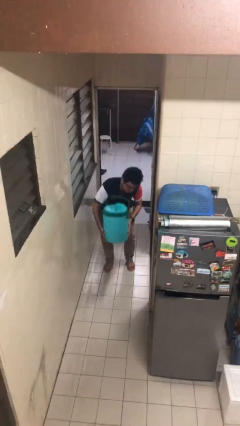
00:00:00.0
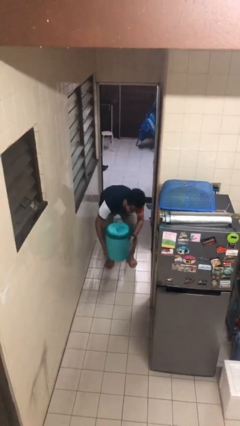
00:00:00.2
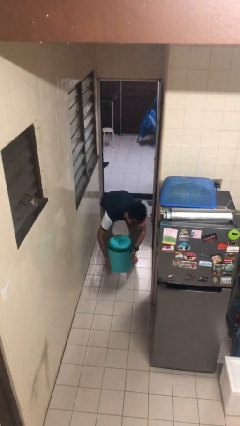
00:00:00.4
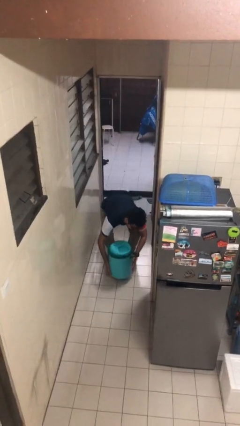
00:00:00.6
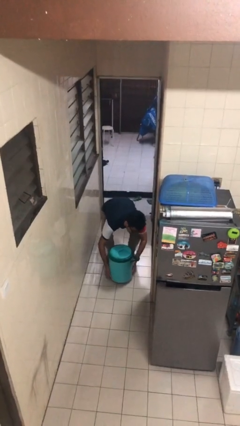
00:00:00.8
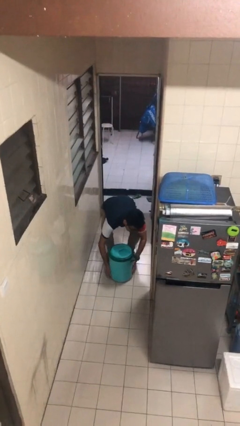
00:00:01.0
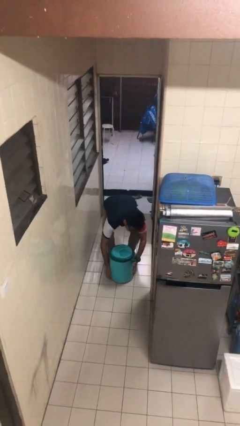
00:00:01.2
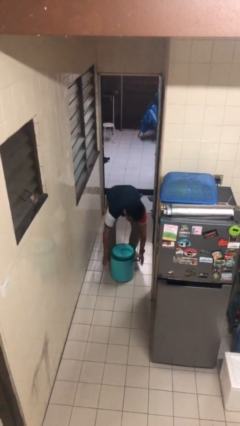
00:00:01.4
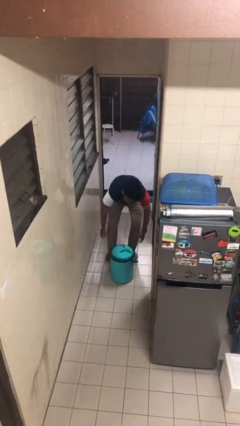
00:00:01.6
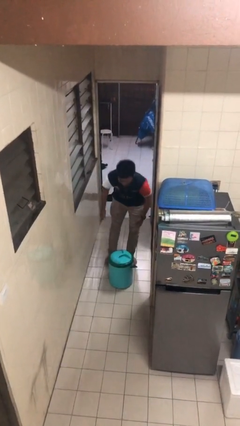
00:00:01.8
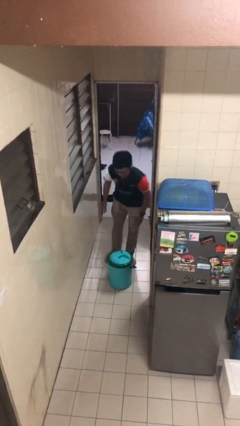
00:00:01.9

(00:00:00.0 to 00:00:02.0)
person puts down object on floor

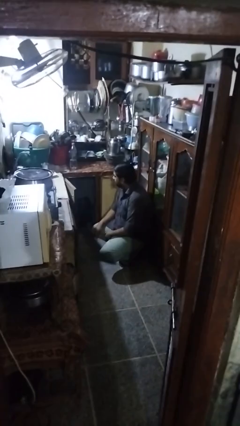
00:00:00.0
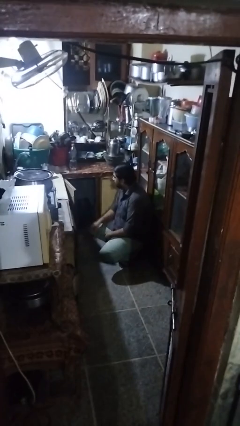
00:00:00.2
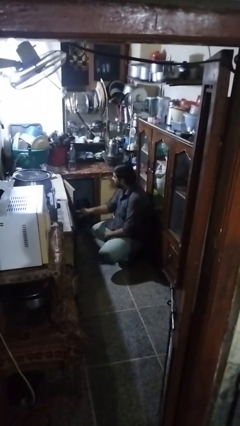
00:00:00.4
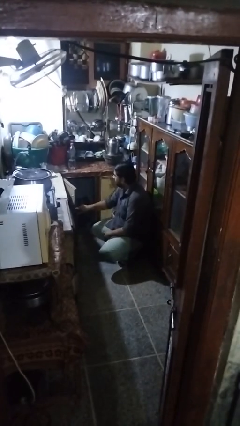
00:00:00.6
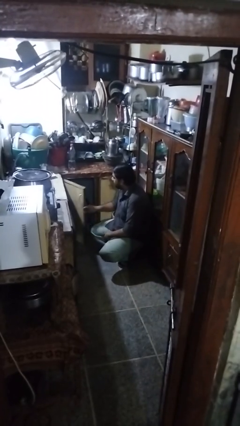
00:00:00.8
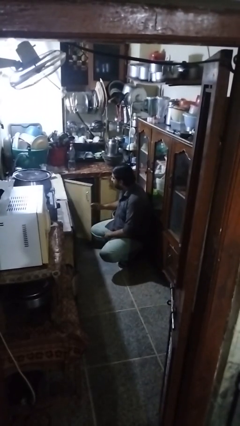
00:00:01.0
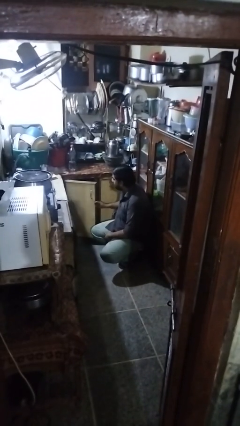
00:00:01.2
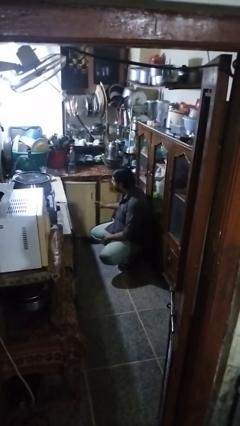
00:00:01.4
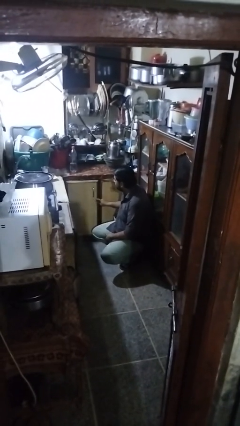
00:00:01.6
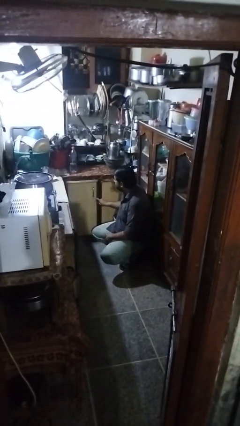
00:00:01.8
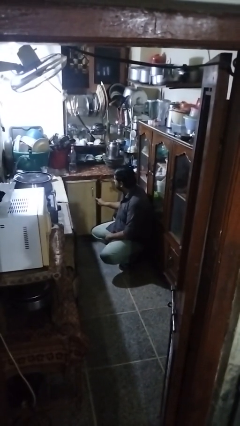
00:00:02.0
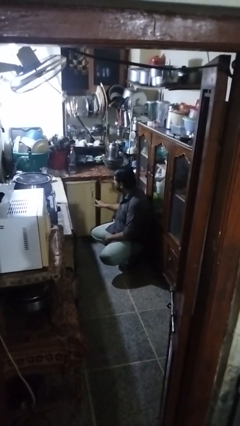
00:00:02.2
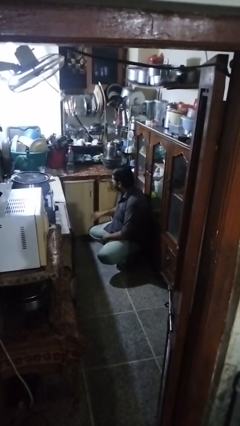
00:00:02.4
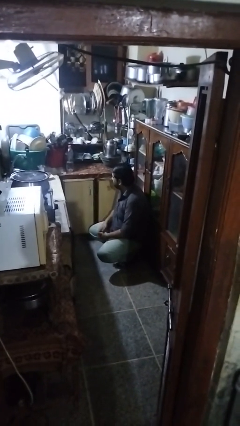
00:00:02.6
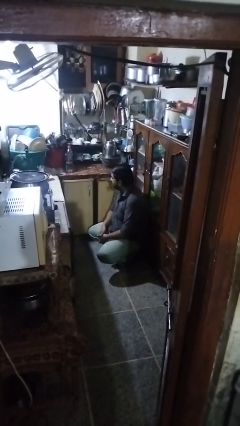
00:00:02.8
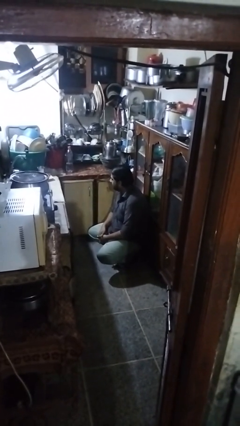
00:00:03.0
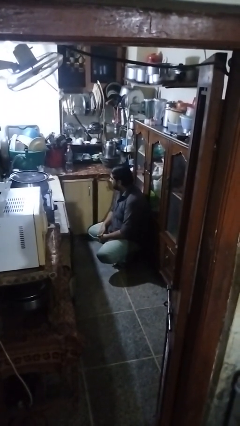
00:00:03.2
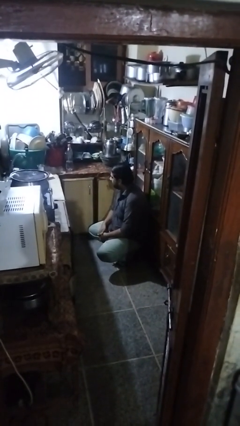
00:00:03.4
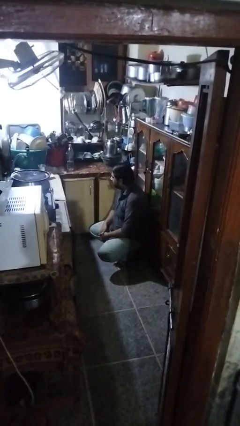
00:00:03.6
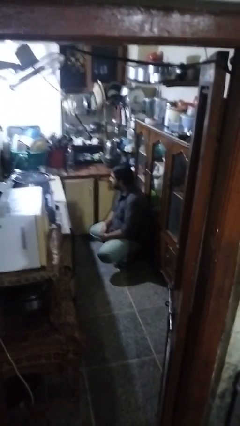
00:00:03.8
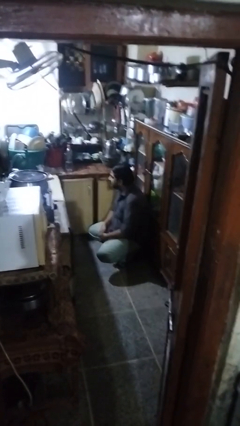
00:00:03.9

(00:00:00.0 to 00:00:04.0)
person closes cabinet

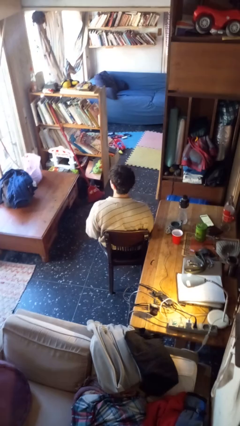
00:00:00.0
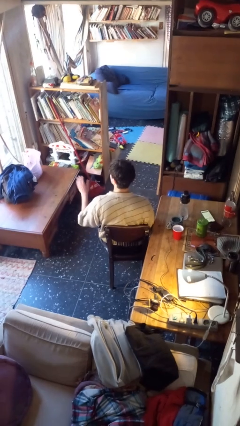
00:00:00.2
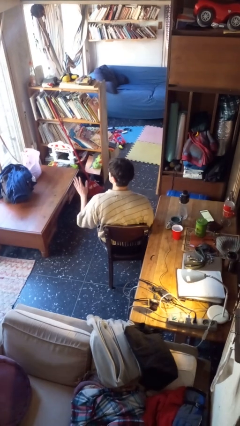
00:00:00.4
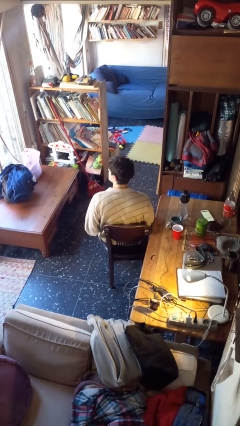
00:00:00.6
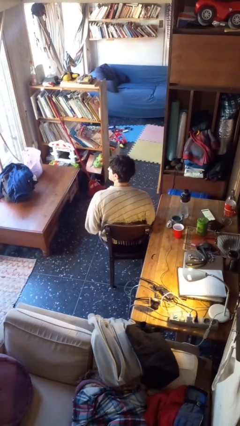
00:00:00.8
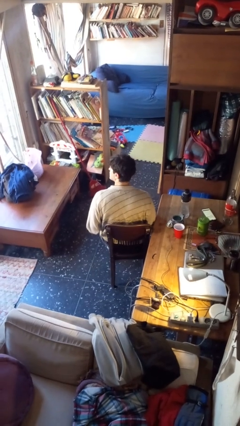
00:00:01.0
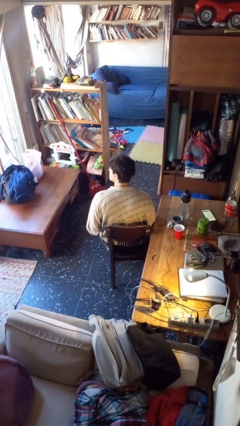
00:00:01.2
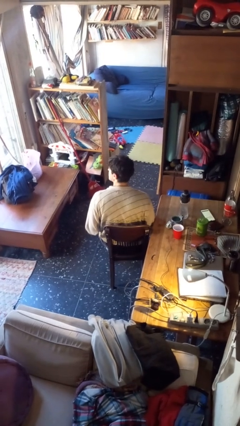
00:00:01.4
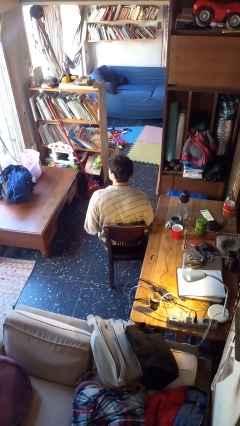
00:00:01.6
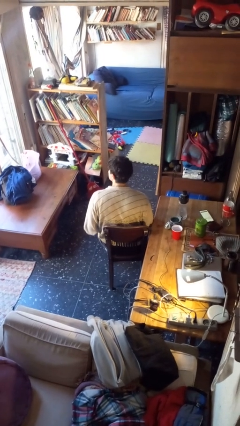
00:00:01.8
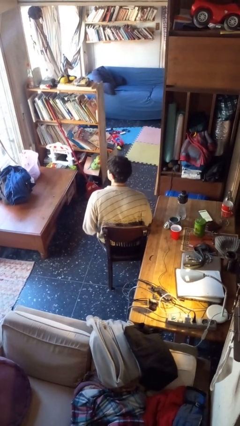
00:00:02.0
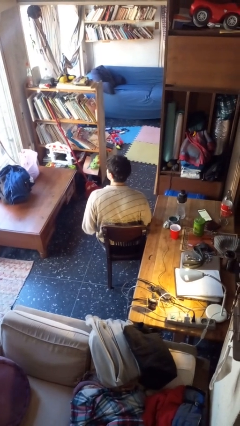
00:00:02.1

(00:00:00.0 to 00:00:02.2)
person slaps hands on thighs

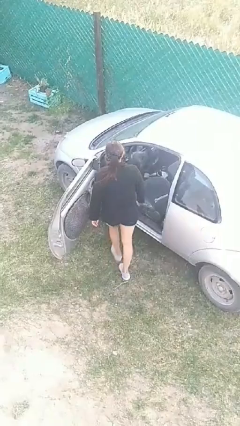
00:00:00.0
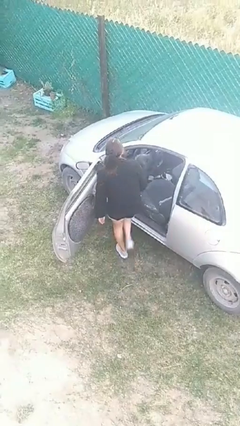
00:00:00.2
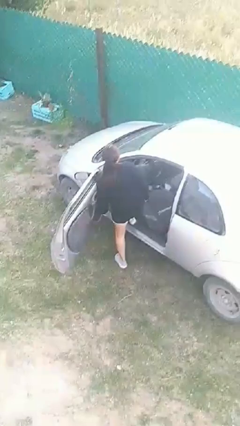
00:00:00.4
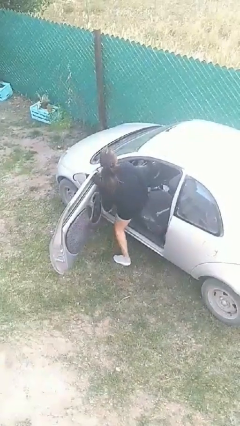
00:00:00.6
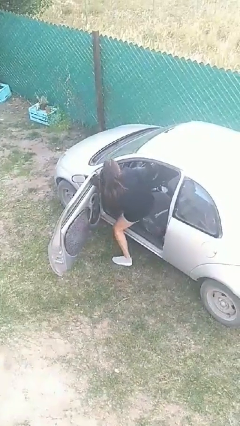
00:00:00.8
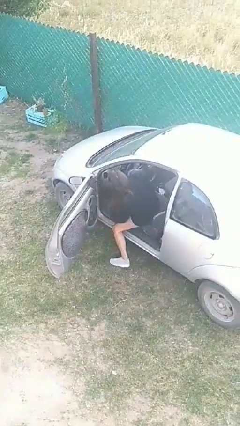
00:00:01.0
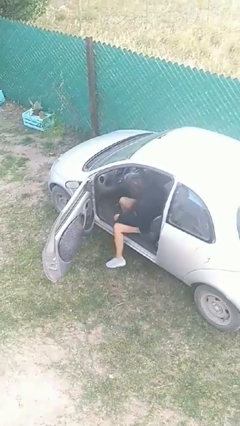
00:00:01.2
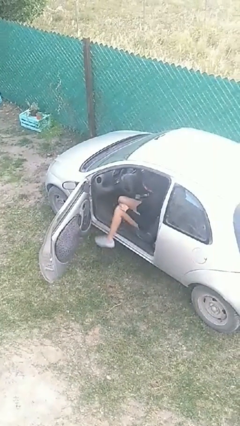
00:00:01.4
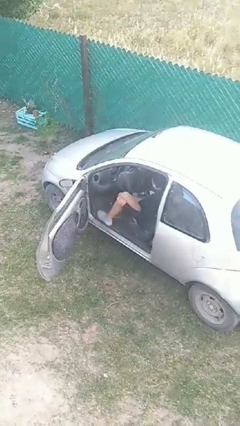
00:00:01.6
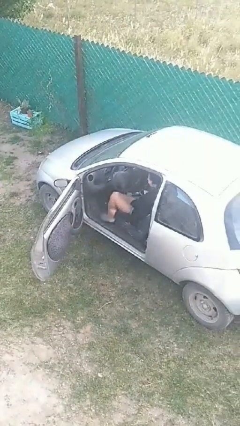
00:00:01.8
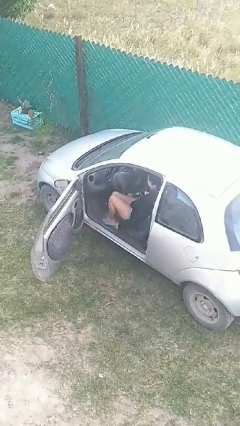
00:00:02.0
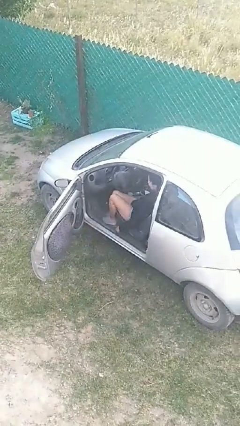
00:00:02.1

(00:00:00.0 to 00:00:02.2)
person enters car

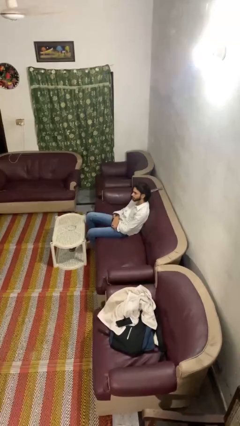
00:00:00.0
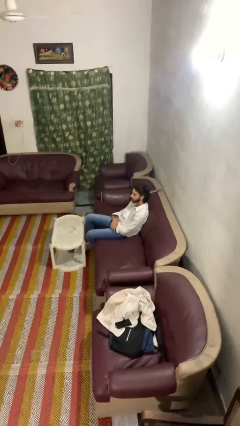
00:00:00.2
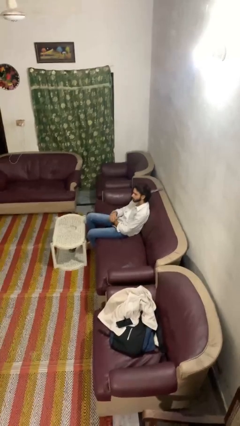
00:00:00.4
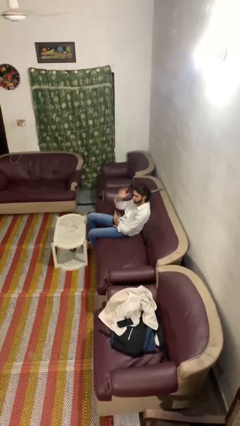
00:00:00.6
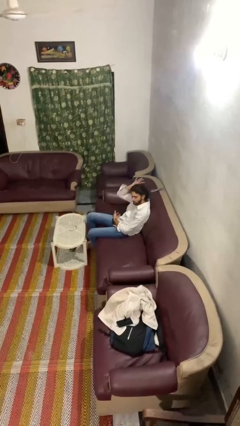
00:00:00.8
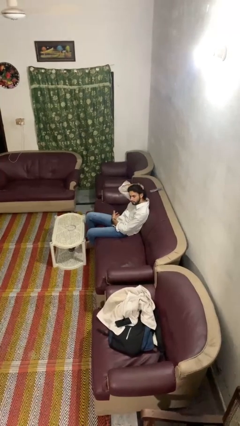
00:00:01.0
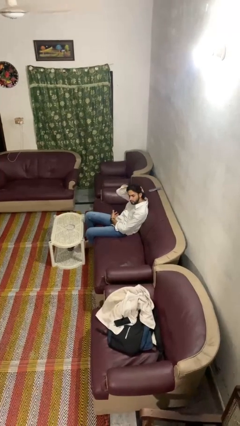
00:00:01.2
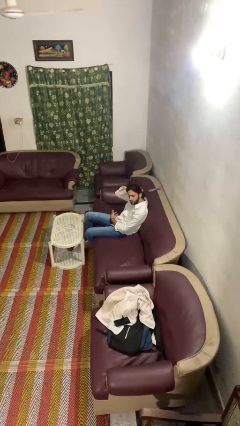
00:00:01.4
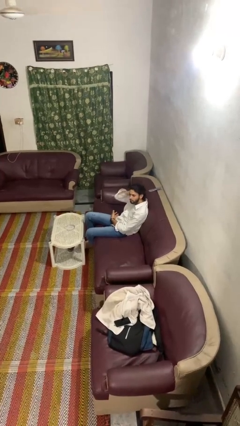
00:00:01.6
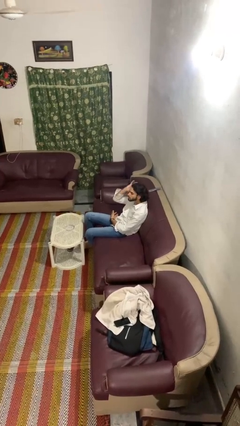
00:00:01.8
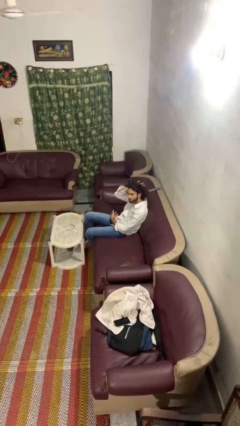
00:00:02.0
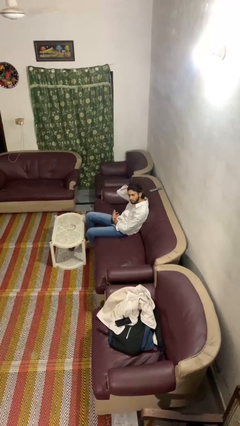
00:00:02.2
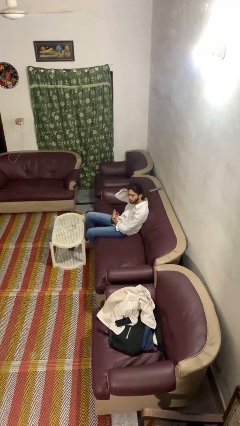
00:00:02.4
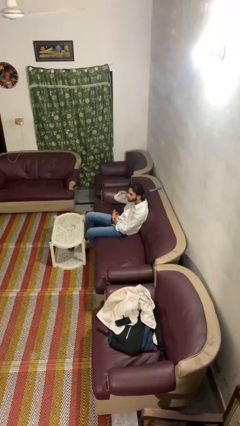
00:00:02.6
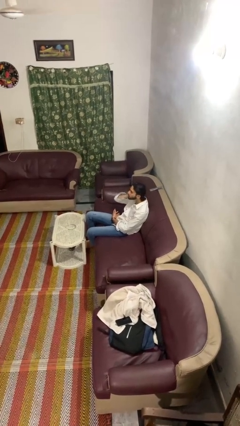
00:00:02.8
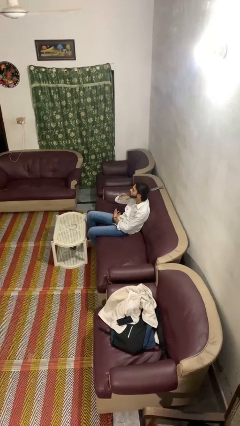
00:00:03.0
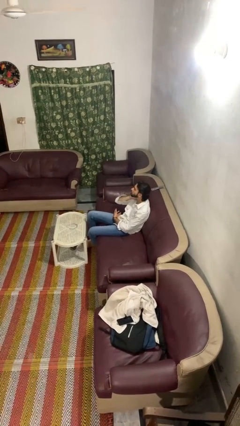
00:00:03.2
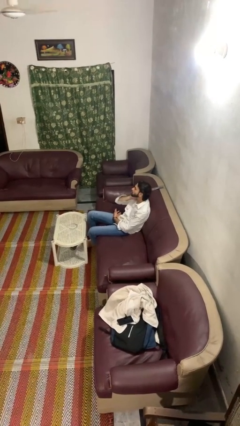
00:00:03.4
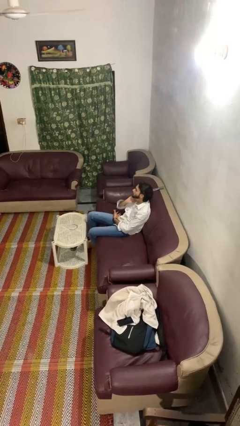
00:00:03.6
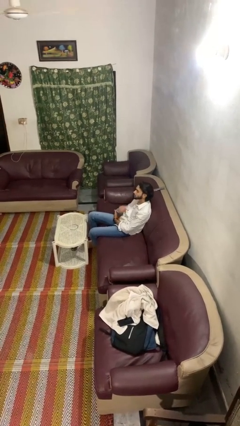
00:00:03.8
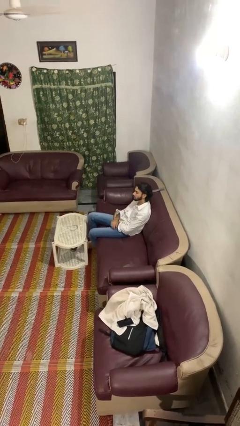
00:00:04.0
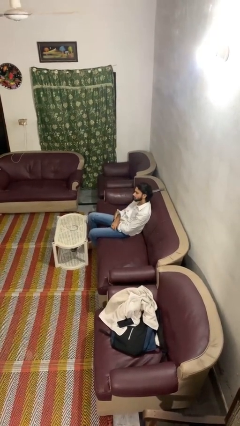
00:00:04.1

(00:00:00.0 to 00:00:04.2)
person strokes hair

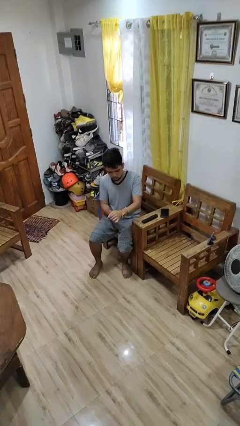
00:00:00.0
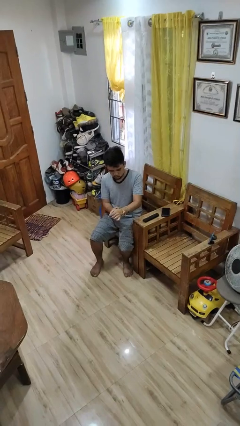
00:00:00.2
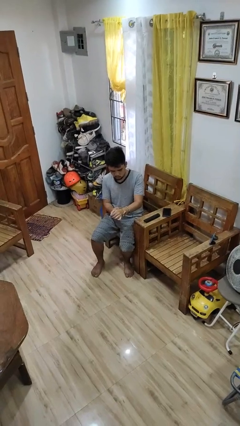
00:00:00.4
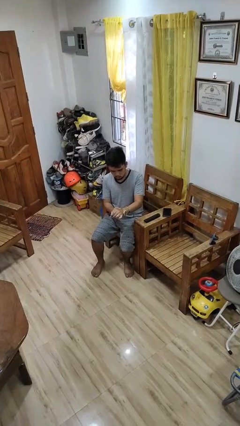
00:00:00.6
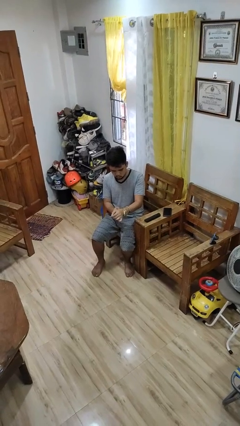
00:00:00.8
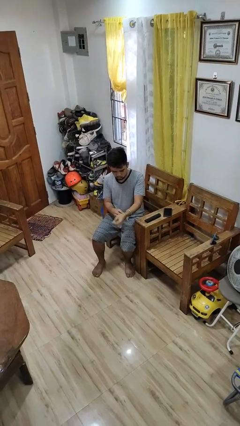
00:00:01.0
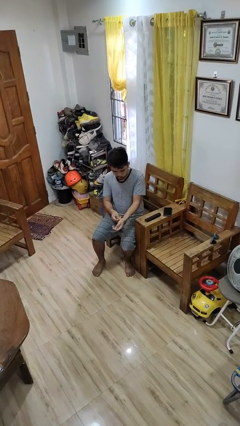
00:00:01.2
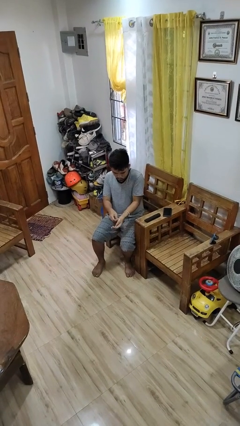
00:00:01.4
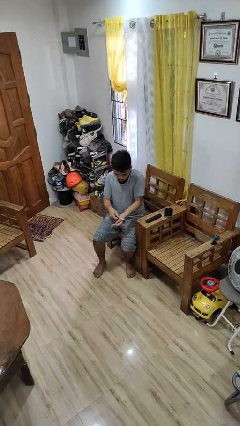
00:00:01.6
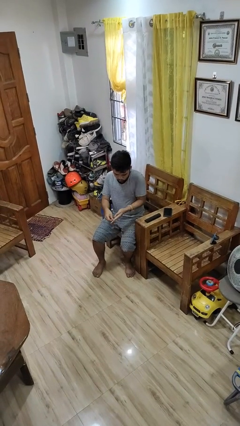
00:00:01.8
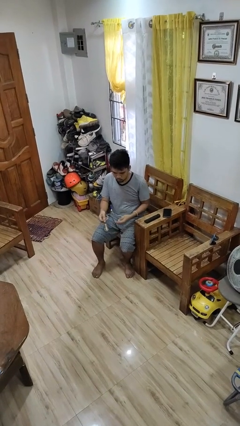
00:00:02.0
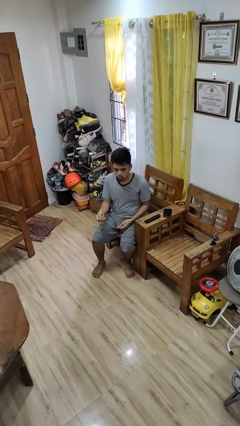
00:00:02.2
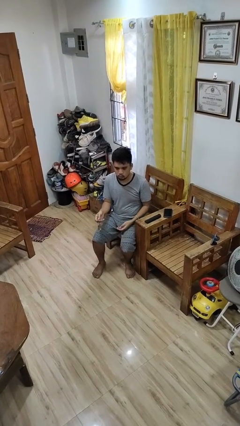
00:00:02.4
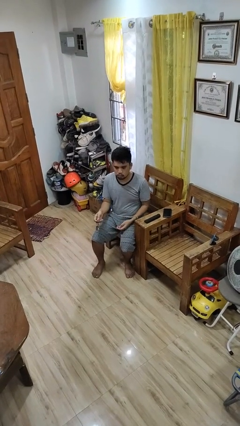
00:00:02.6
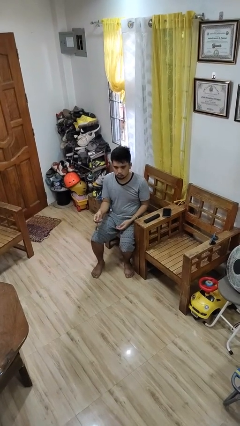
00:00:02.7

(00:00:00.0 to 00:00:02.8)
person takes off wristwatch
